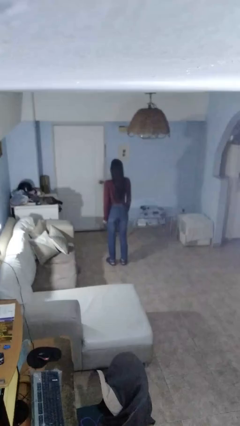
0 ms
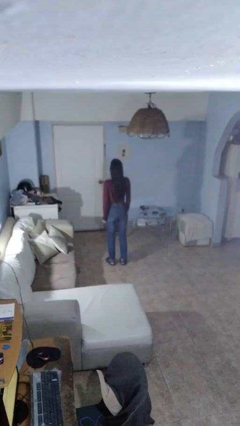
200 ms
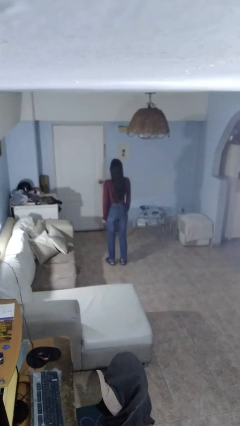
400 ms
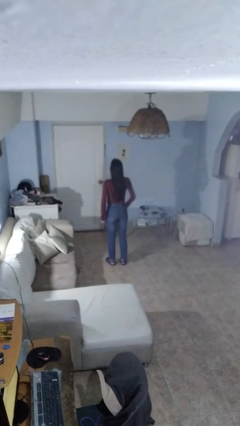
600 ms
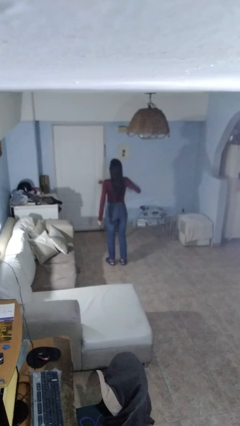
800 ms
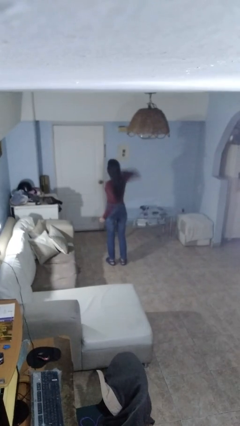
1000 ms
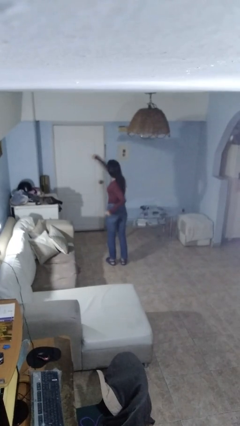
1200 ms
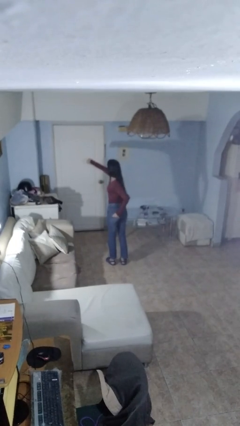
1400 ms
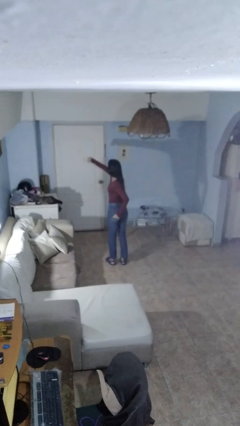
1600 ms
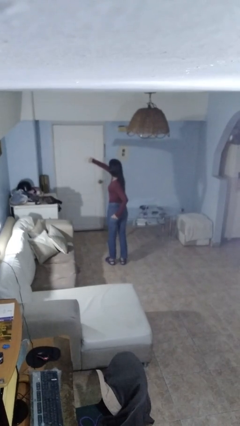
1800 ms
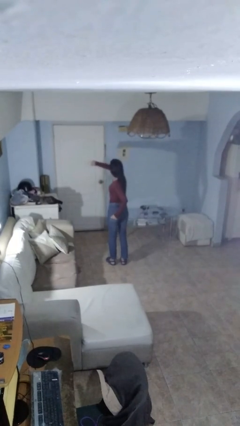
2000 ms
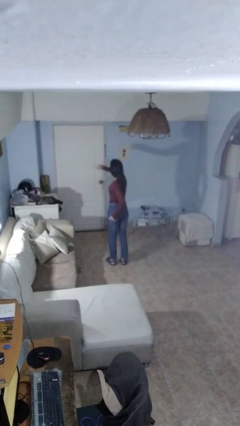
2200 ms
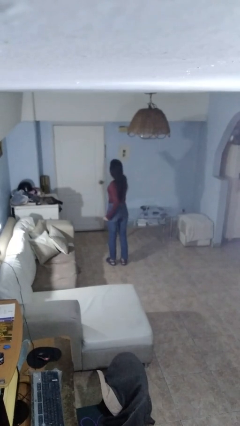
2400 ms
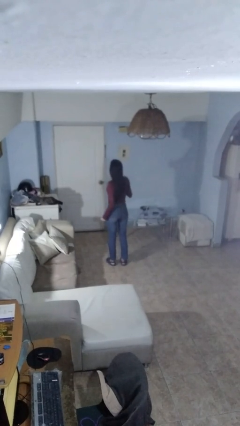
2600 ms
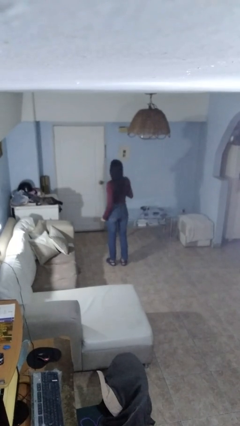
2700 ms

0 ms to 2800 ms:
person punches

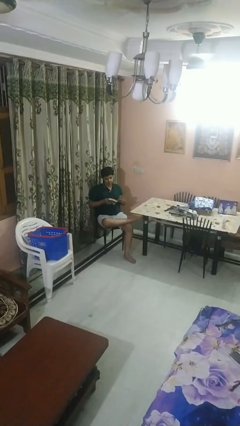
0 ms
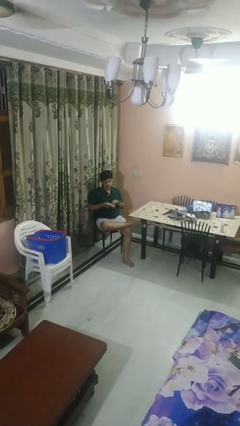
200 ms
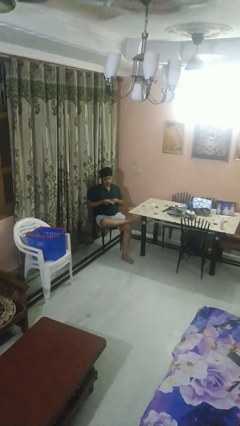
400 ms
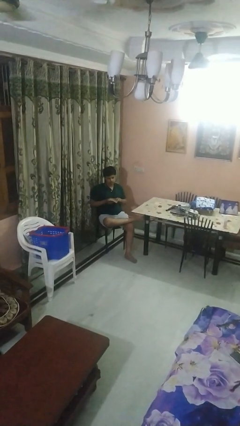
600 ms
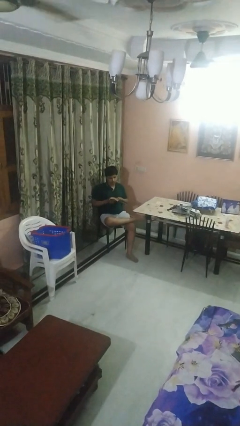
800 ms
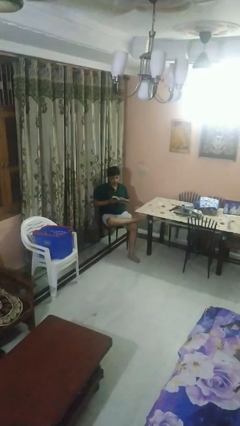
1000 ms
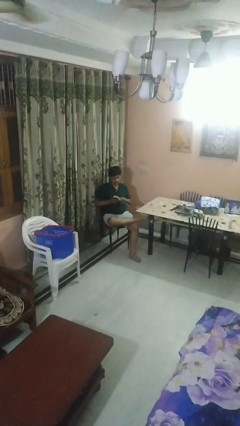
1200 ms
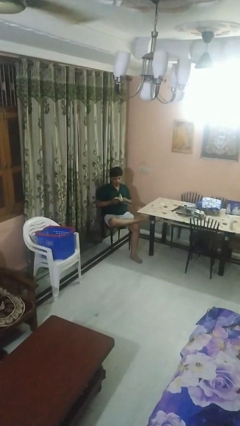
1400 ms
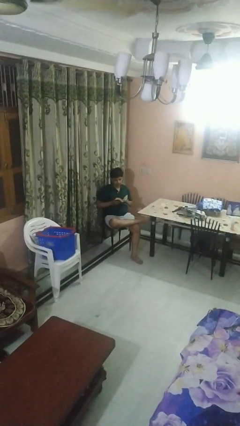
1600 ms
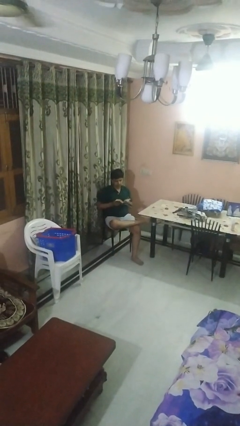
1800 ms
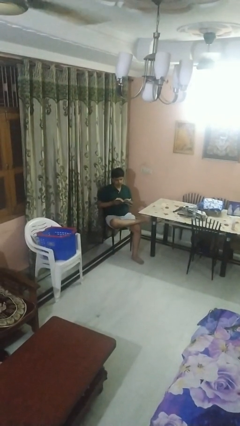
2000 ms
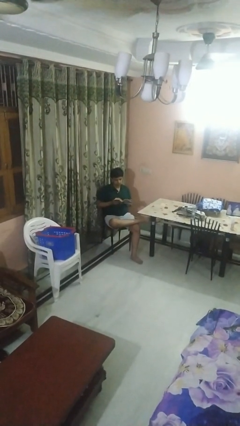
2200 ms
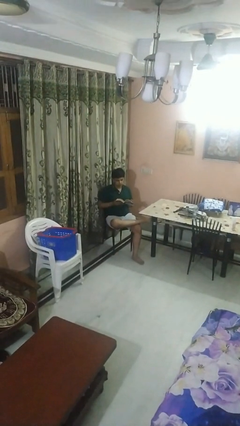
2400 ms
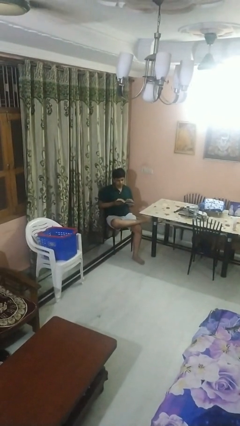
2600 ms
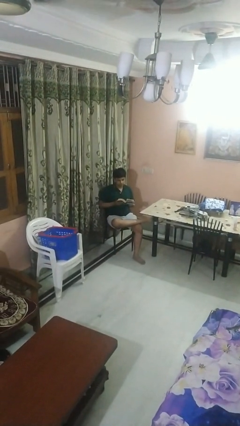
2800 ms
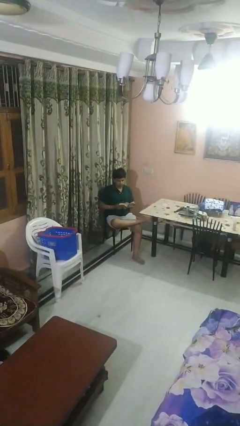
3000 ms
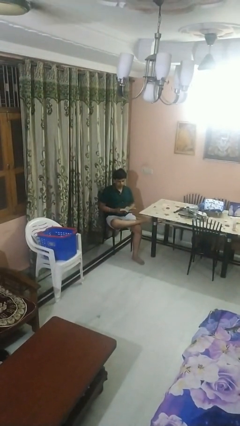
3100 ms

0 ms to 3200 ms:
person reads book

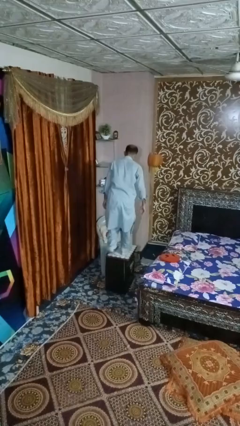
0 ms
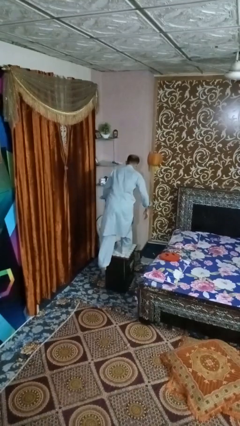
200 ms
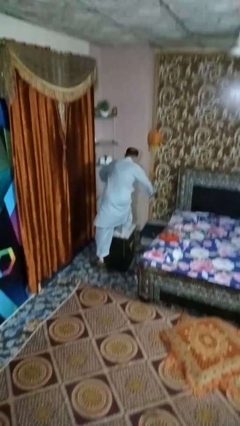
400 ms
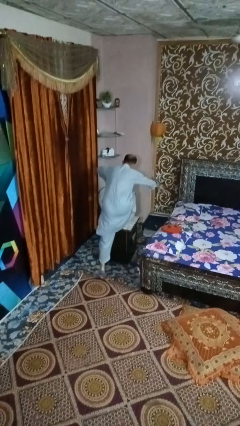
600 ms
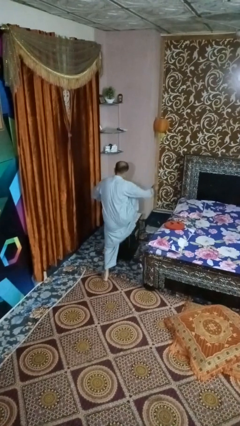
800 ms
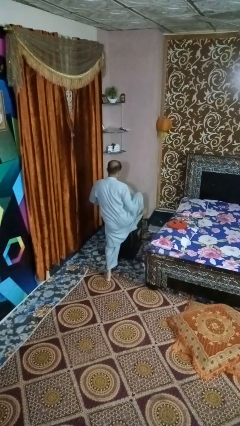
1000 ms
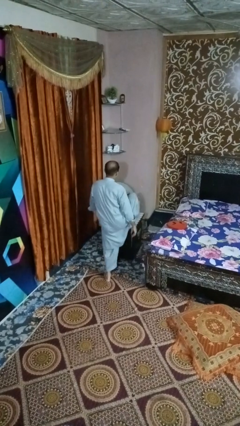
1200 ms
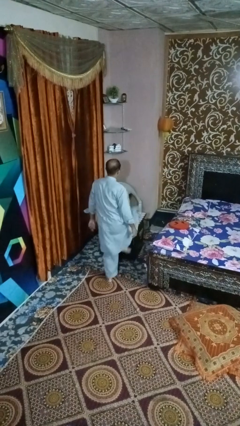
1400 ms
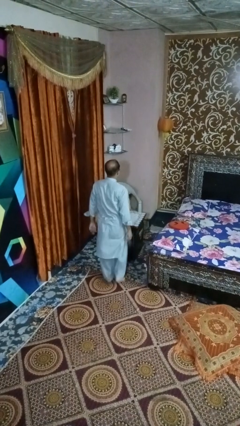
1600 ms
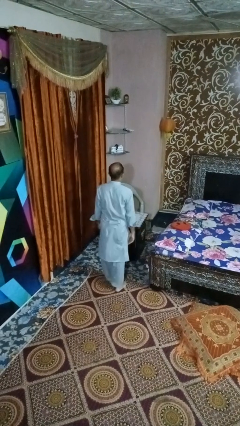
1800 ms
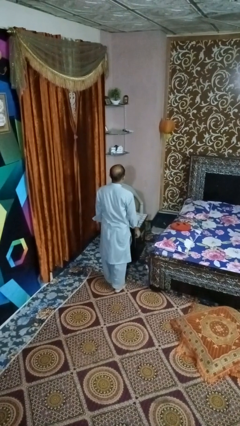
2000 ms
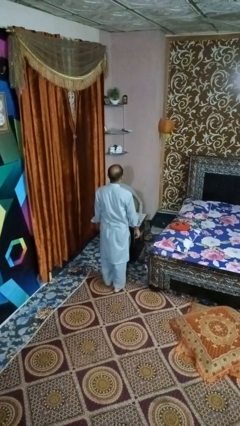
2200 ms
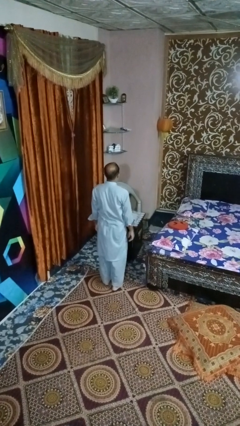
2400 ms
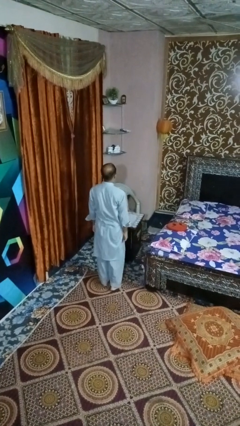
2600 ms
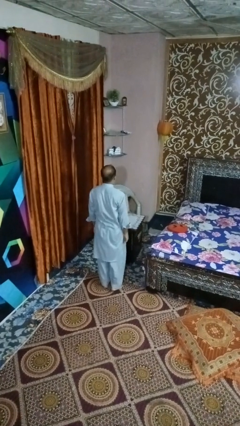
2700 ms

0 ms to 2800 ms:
person climbs off table

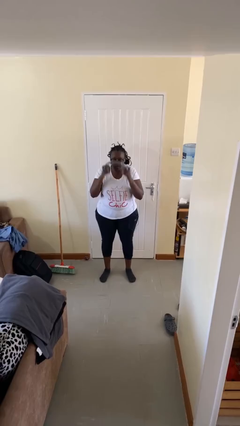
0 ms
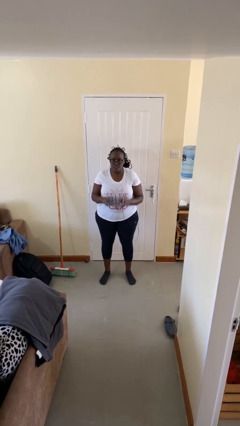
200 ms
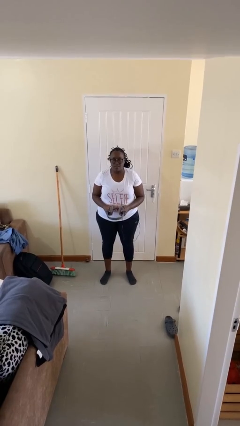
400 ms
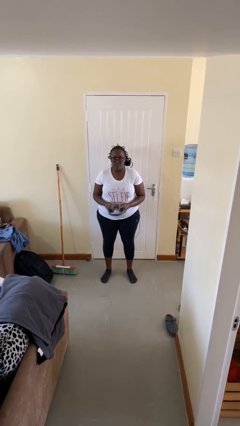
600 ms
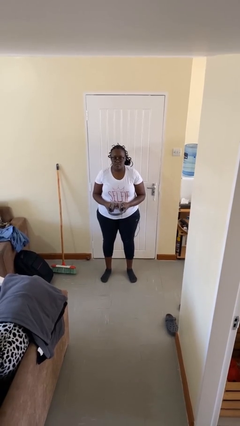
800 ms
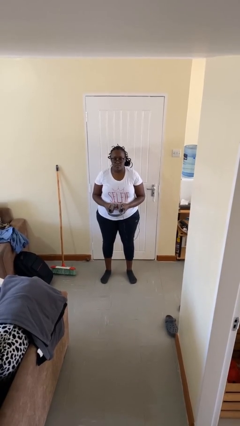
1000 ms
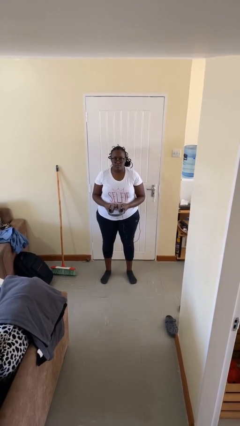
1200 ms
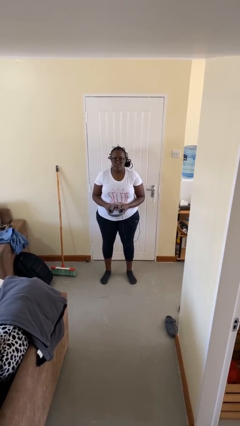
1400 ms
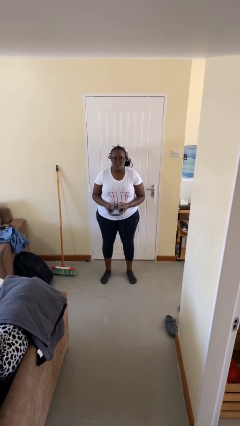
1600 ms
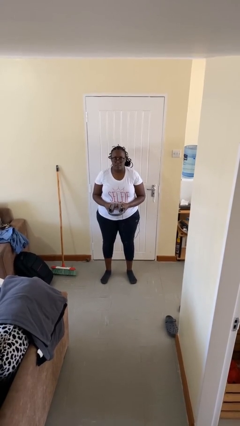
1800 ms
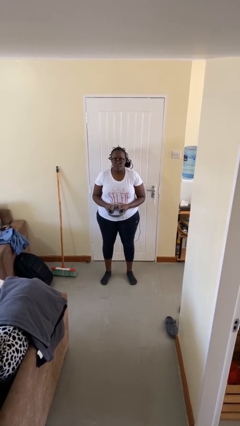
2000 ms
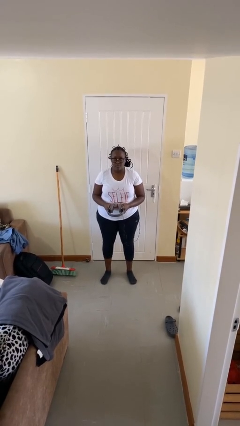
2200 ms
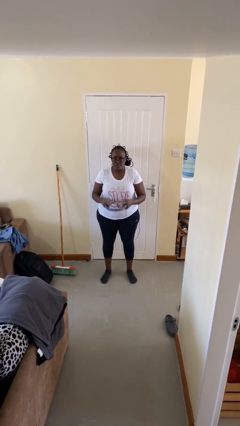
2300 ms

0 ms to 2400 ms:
person takes off headphones

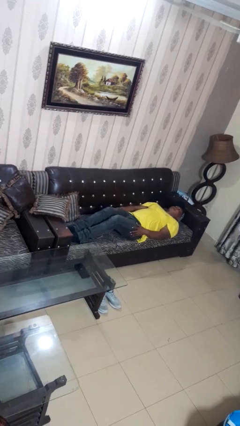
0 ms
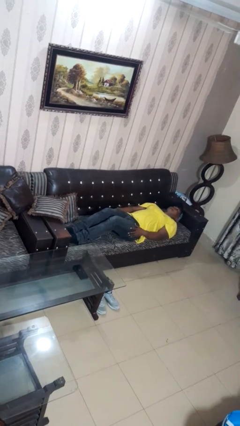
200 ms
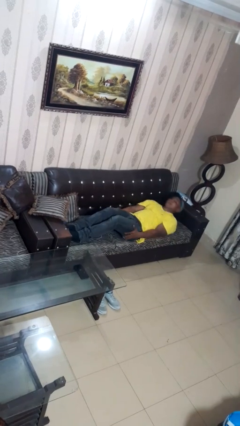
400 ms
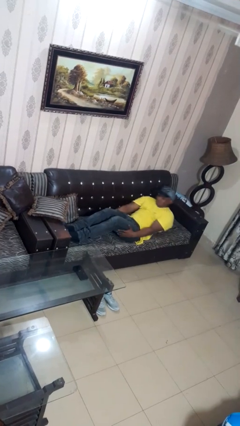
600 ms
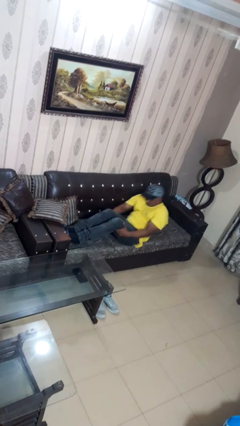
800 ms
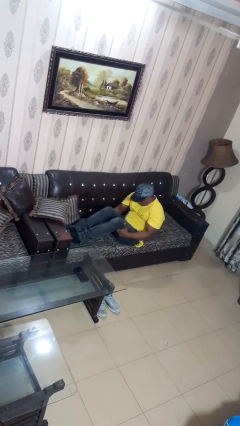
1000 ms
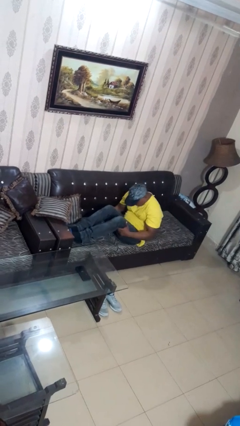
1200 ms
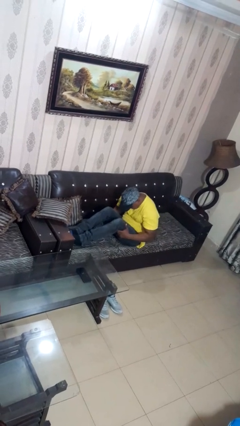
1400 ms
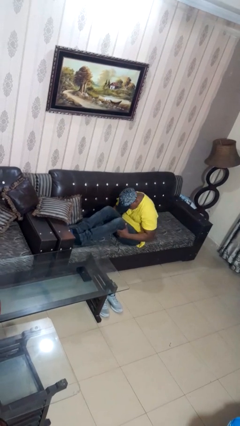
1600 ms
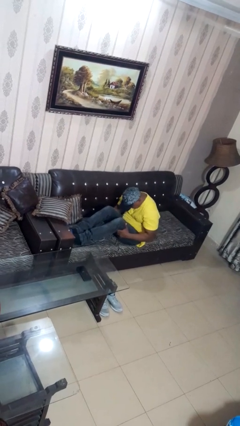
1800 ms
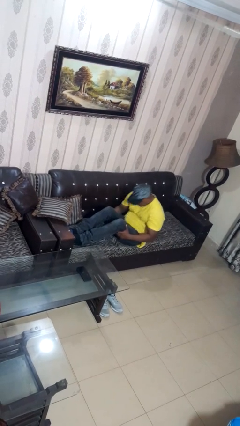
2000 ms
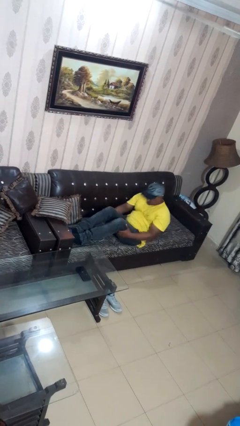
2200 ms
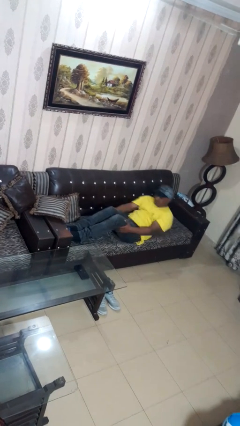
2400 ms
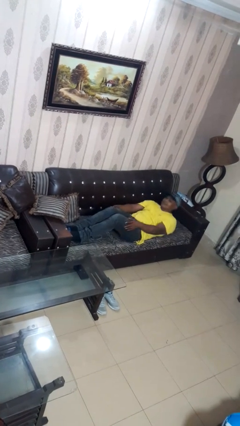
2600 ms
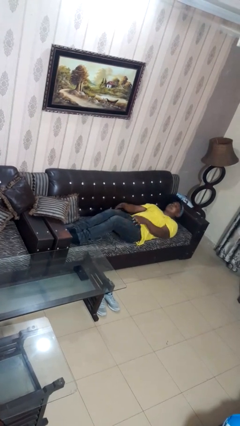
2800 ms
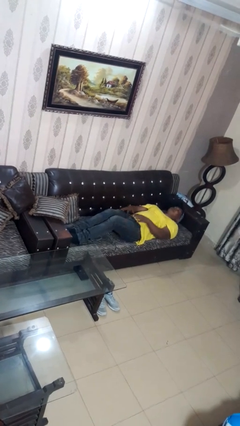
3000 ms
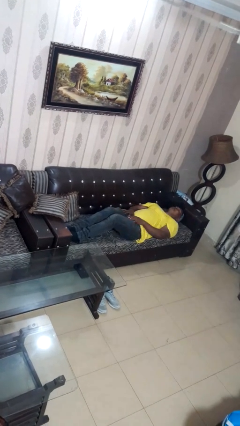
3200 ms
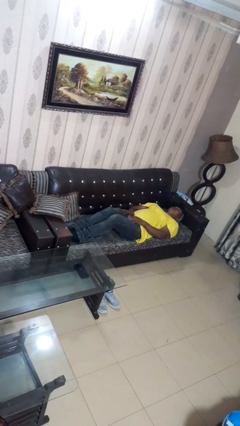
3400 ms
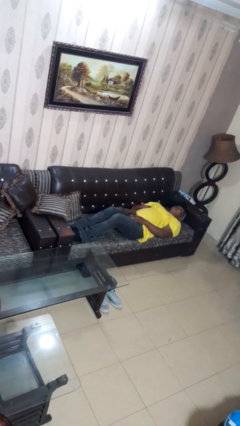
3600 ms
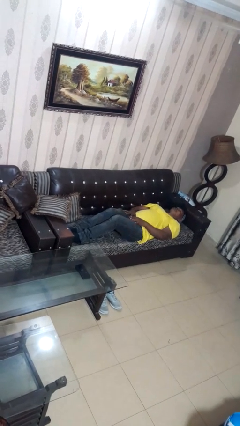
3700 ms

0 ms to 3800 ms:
person exercises with situp

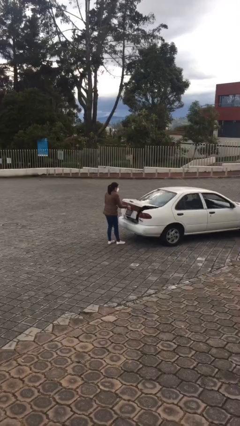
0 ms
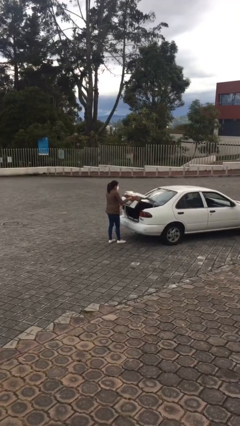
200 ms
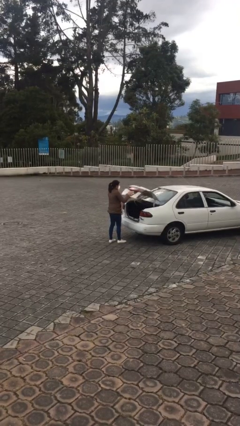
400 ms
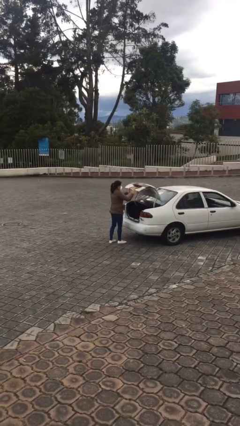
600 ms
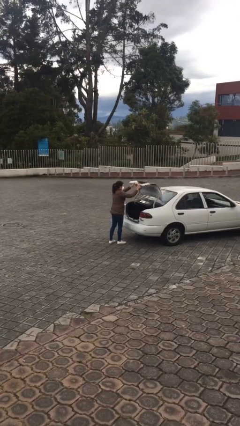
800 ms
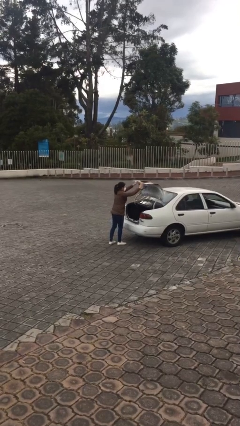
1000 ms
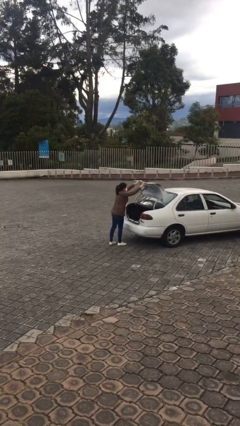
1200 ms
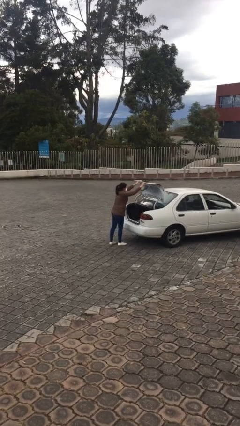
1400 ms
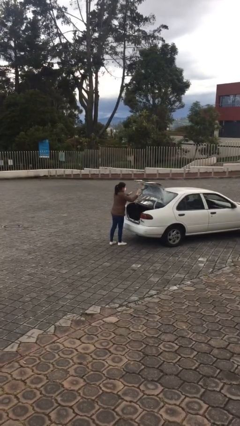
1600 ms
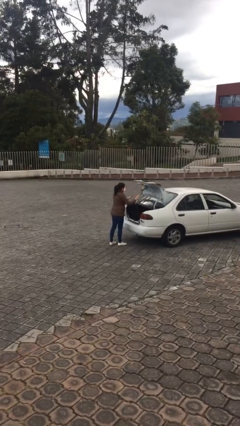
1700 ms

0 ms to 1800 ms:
person opens car trunk

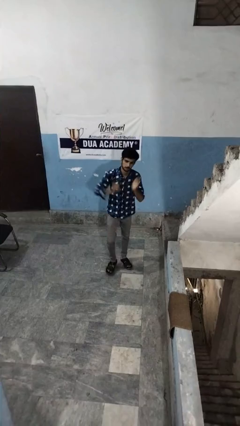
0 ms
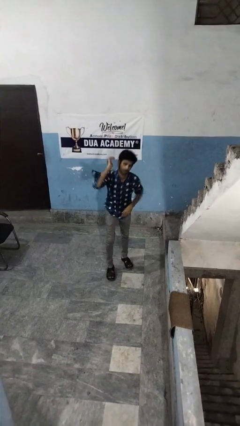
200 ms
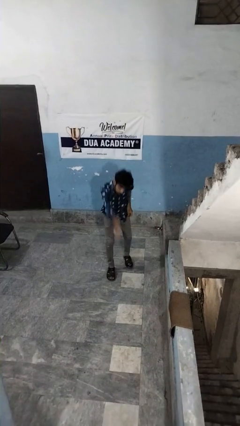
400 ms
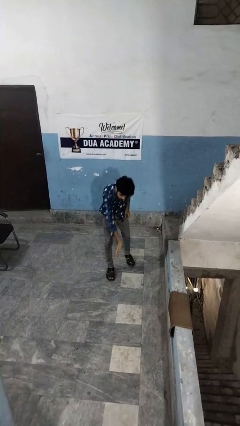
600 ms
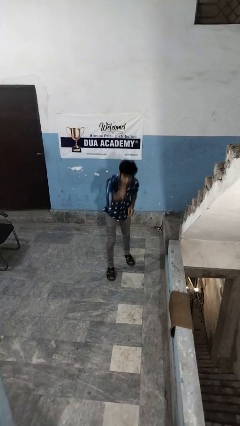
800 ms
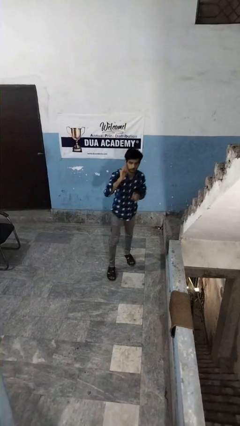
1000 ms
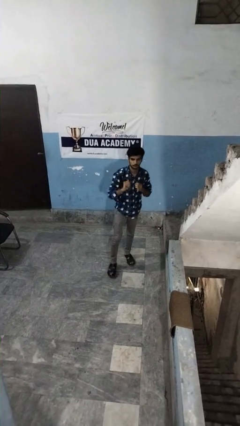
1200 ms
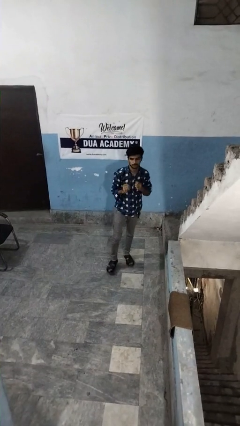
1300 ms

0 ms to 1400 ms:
person karate chop
